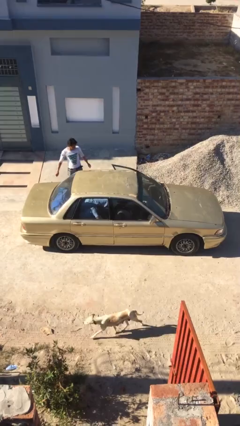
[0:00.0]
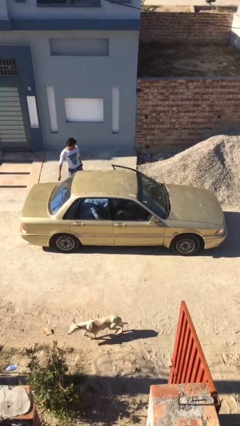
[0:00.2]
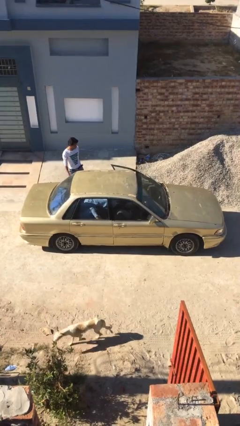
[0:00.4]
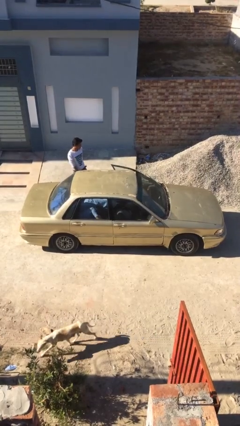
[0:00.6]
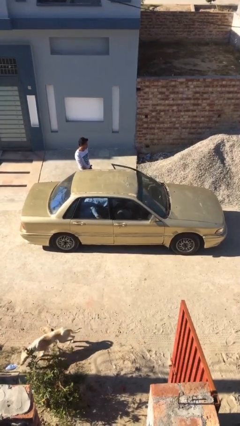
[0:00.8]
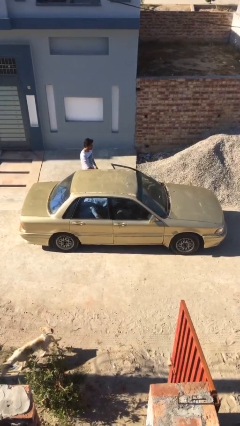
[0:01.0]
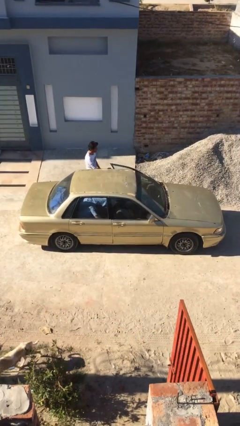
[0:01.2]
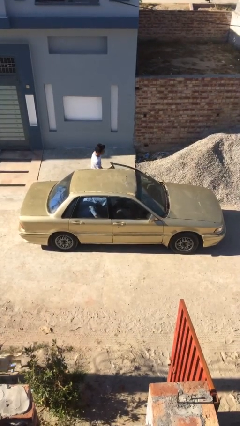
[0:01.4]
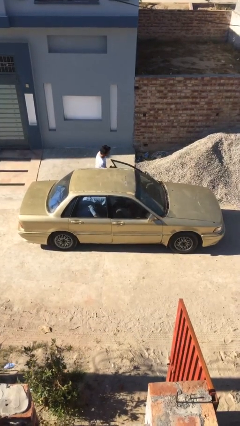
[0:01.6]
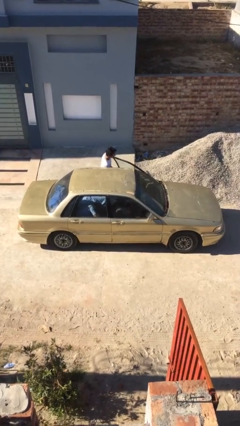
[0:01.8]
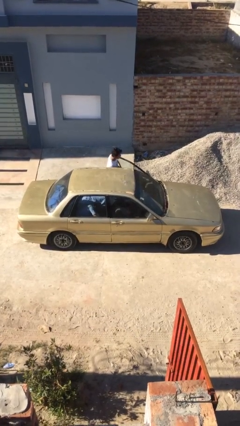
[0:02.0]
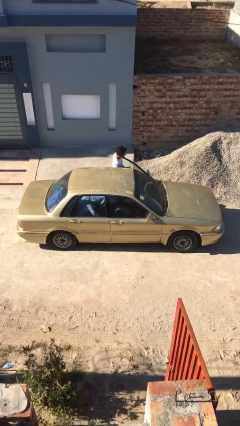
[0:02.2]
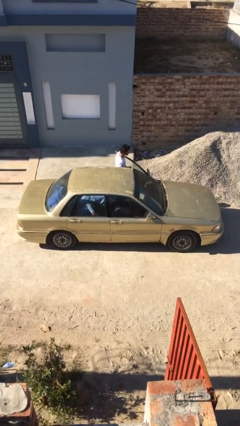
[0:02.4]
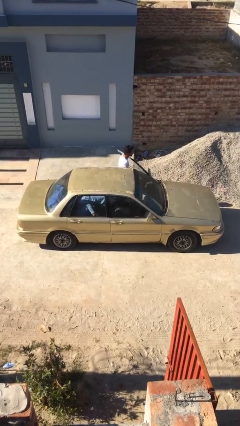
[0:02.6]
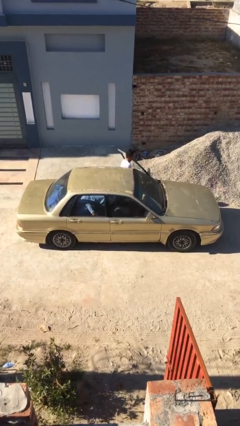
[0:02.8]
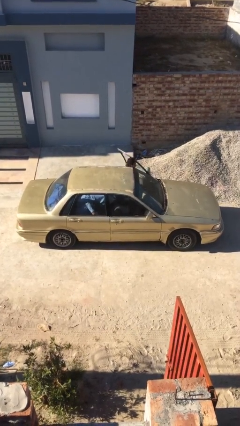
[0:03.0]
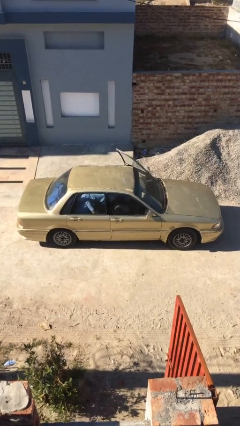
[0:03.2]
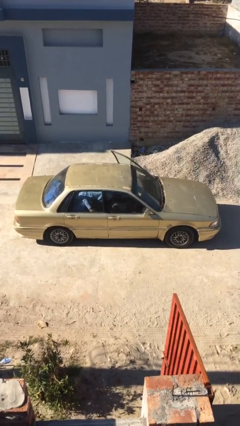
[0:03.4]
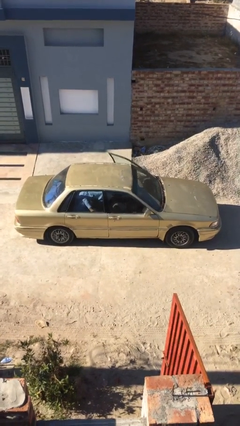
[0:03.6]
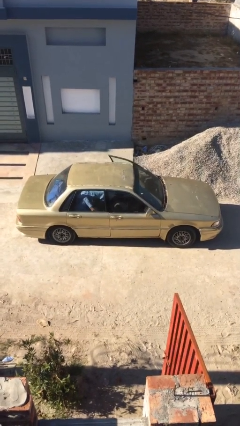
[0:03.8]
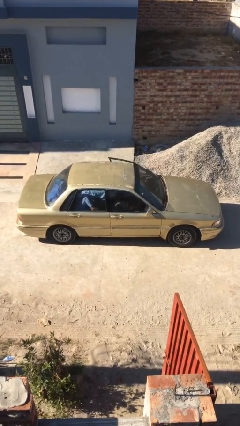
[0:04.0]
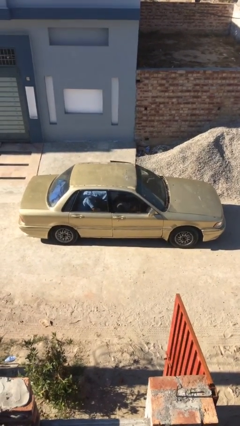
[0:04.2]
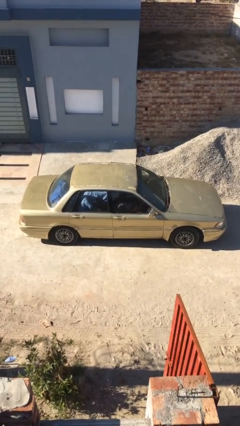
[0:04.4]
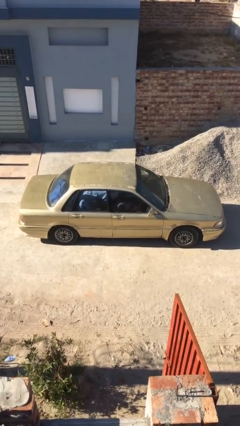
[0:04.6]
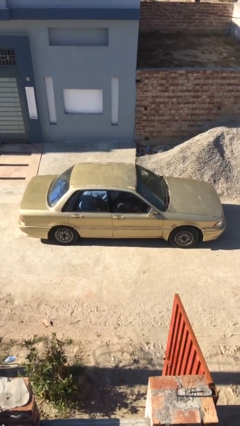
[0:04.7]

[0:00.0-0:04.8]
car picks up person

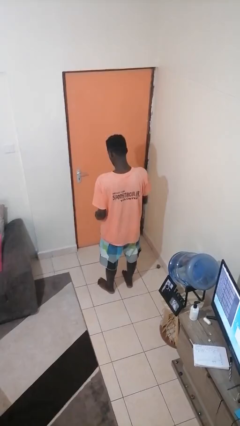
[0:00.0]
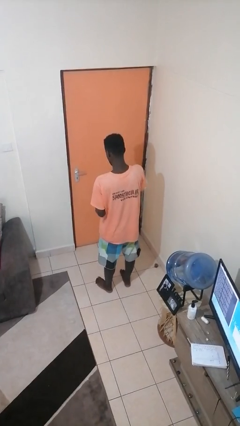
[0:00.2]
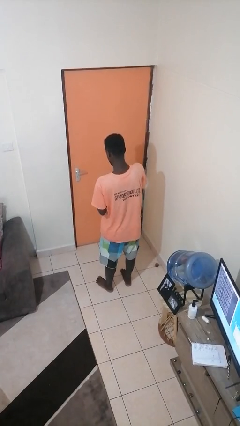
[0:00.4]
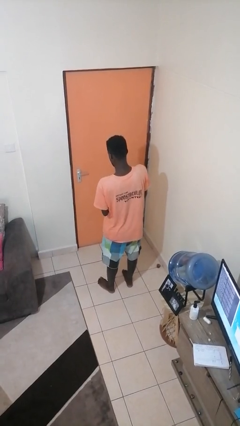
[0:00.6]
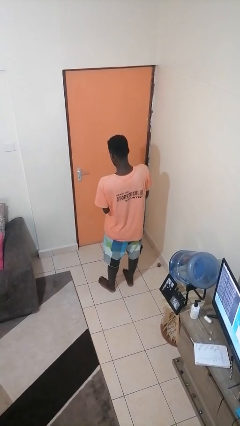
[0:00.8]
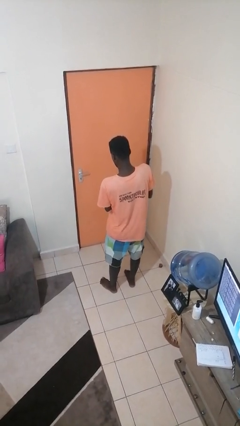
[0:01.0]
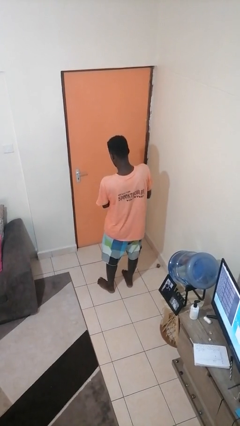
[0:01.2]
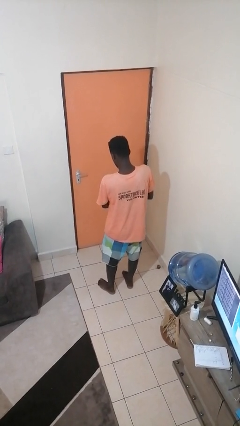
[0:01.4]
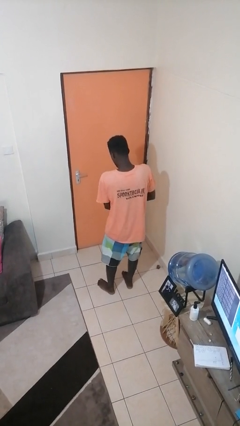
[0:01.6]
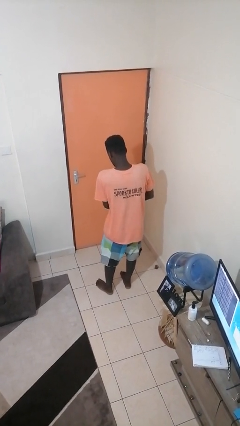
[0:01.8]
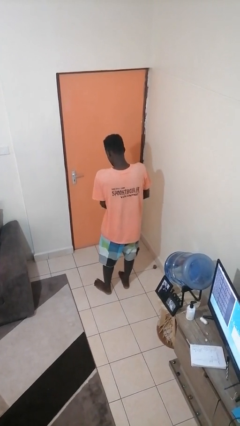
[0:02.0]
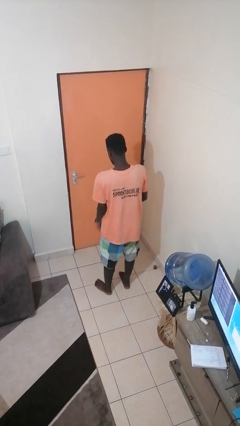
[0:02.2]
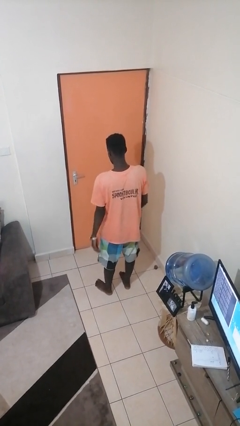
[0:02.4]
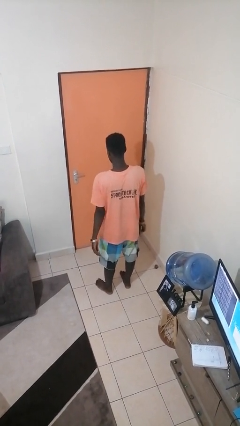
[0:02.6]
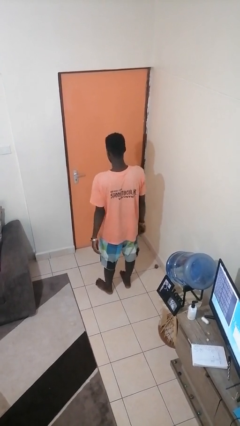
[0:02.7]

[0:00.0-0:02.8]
person puts on wristwatch

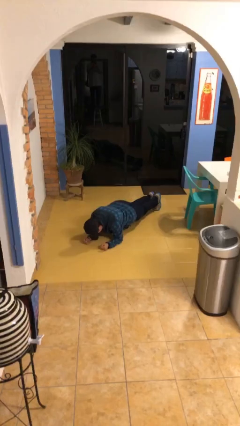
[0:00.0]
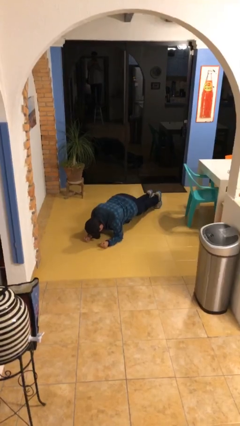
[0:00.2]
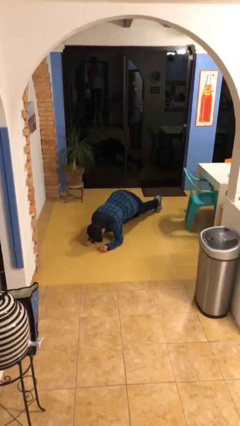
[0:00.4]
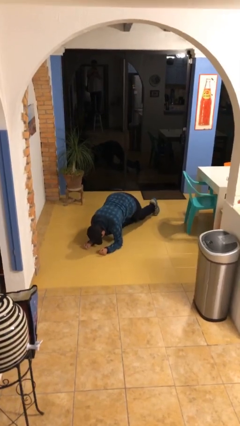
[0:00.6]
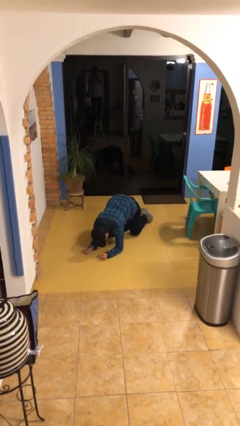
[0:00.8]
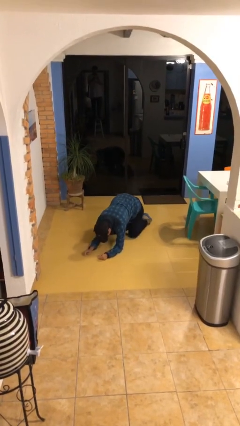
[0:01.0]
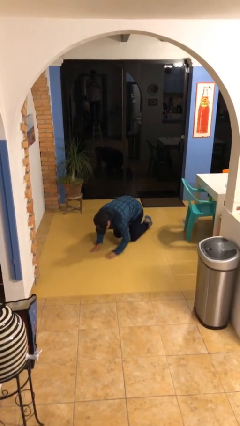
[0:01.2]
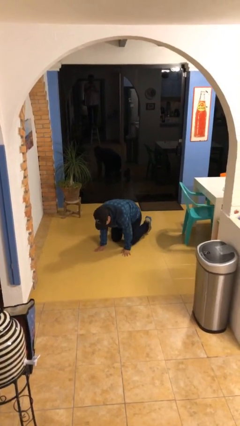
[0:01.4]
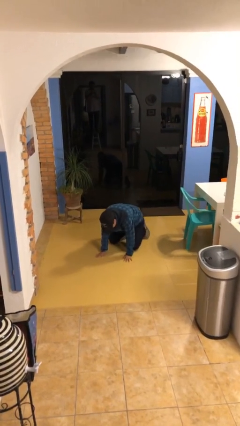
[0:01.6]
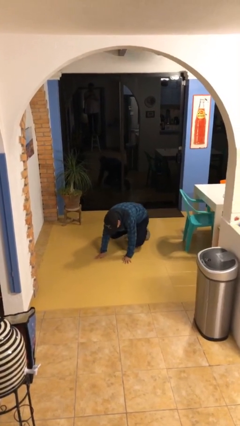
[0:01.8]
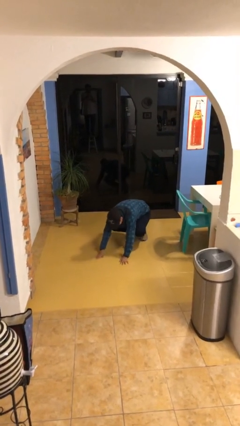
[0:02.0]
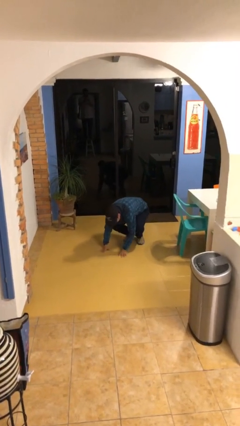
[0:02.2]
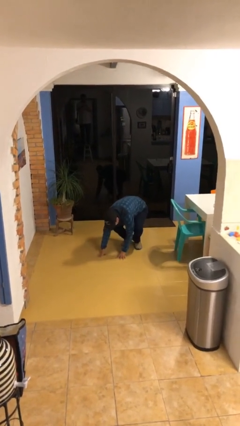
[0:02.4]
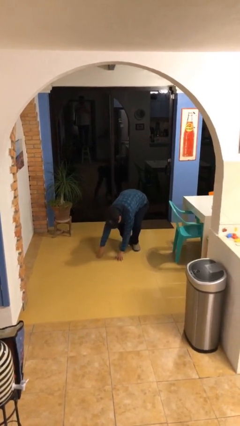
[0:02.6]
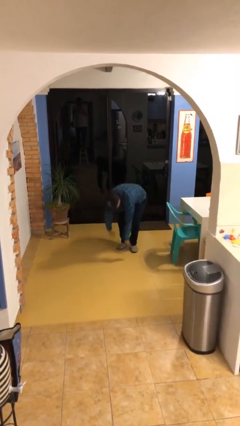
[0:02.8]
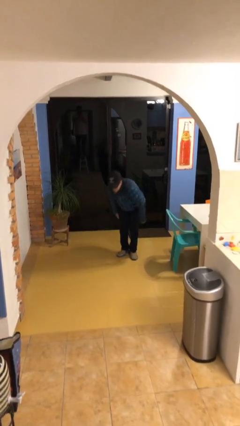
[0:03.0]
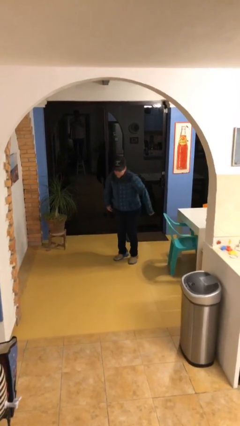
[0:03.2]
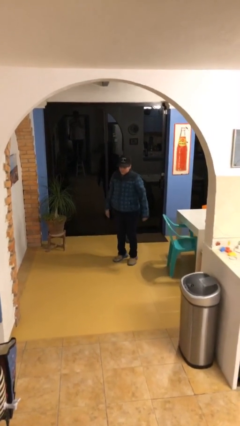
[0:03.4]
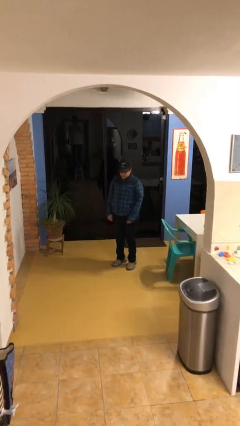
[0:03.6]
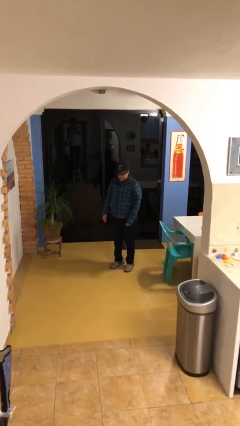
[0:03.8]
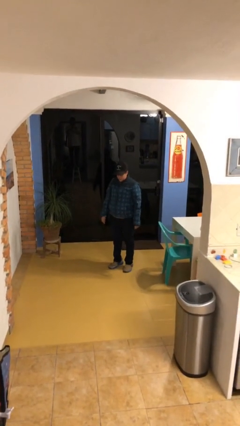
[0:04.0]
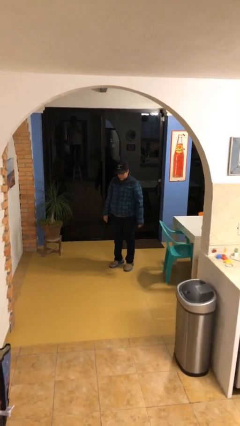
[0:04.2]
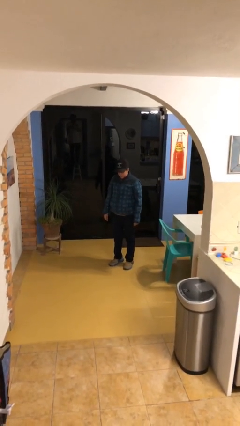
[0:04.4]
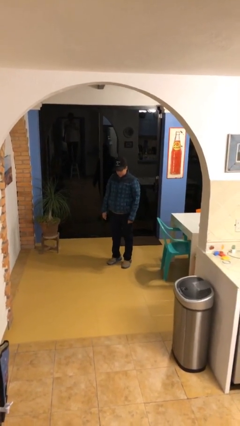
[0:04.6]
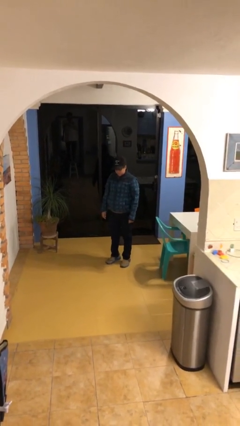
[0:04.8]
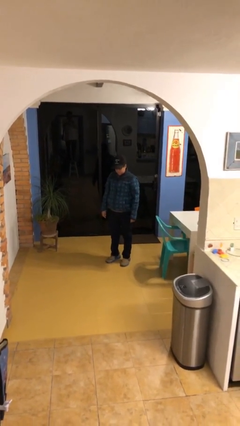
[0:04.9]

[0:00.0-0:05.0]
person stands up from floor

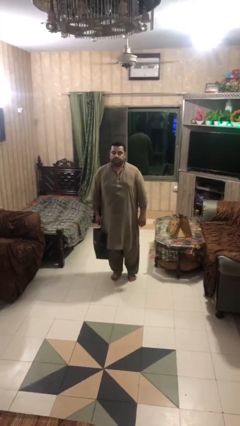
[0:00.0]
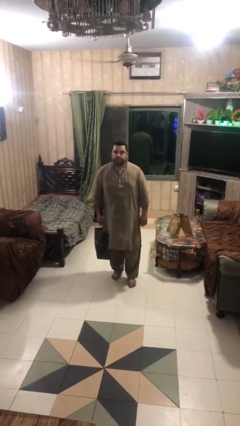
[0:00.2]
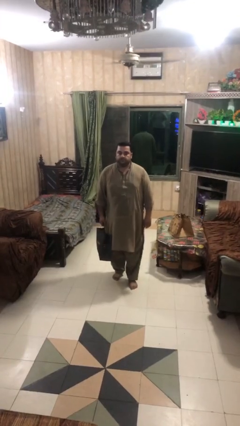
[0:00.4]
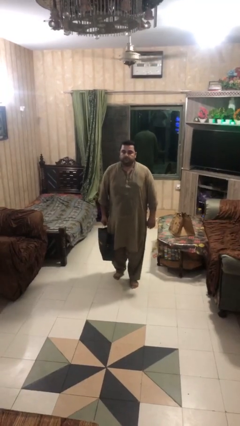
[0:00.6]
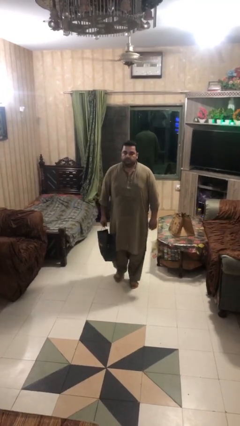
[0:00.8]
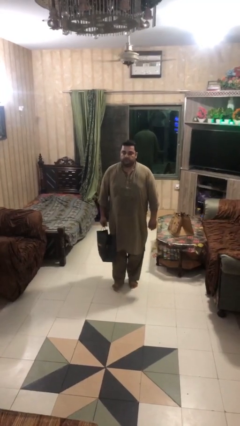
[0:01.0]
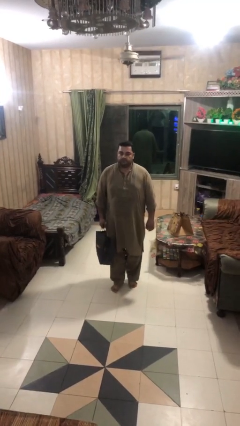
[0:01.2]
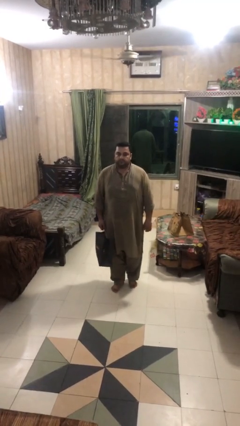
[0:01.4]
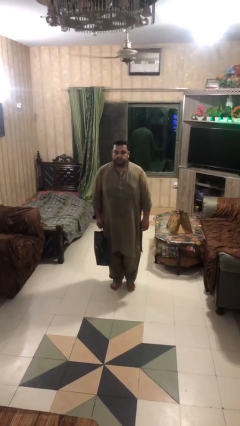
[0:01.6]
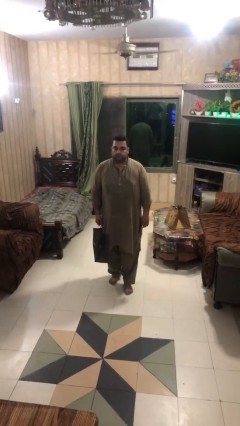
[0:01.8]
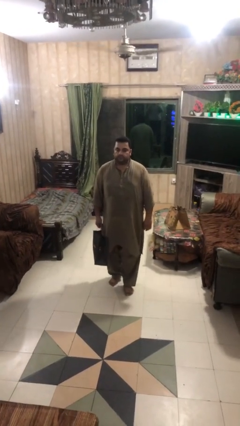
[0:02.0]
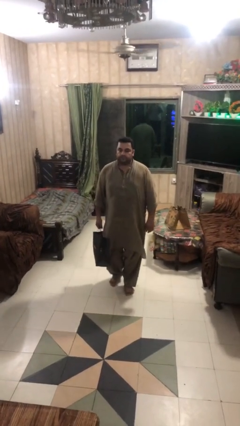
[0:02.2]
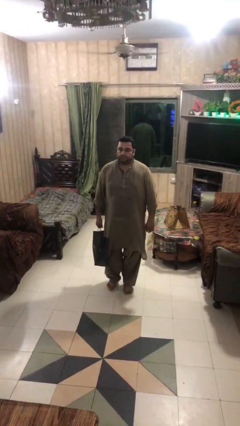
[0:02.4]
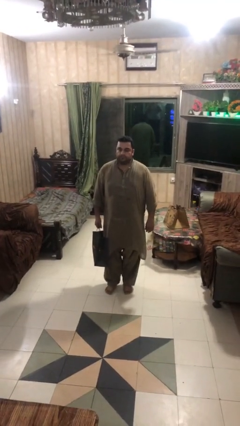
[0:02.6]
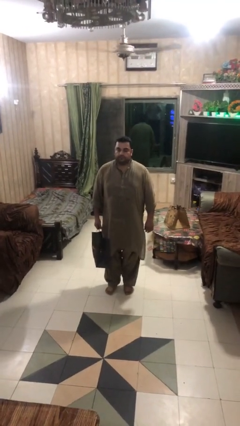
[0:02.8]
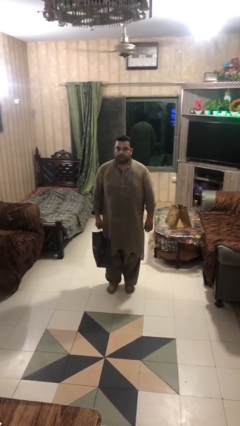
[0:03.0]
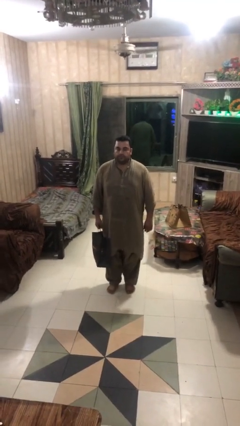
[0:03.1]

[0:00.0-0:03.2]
person carries groceries

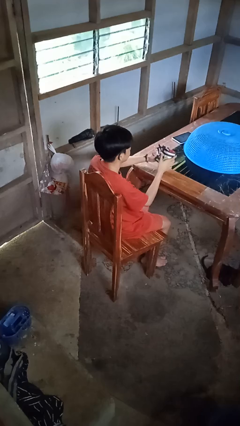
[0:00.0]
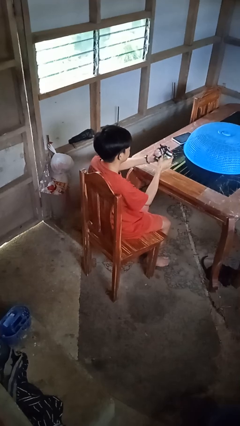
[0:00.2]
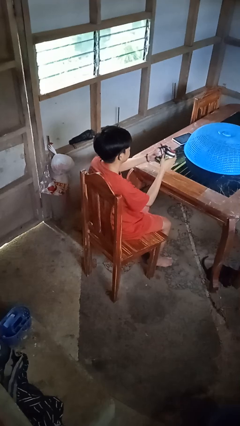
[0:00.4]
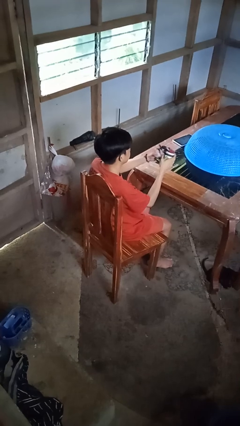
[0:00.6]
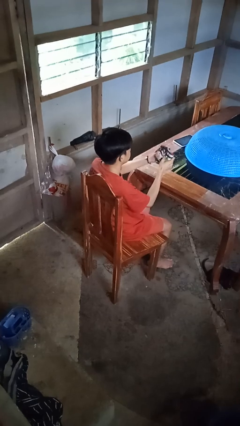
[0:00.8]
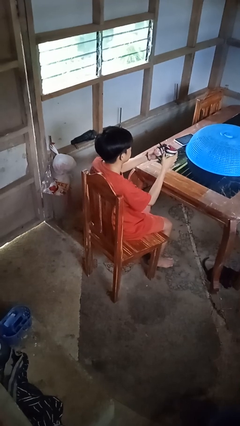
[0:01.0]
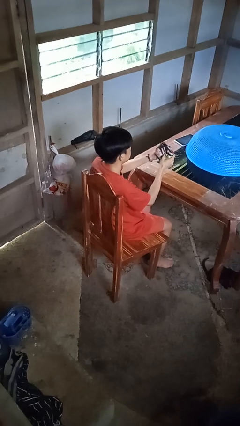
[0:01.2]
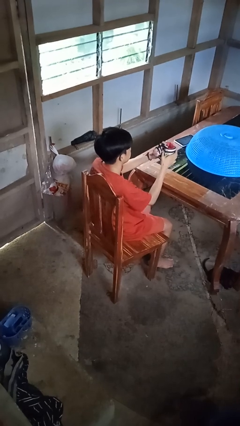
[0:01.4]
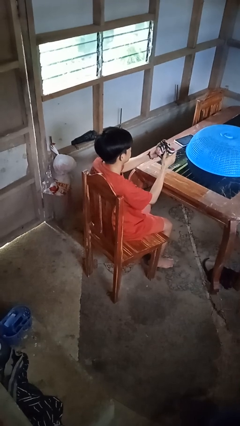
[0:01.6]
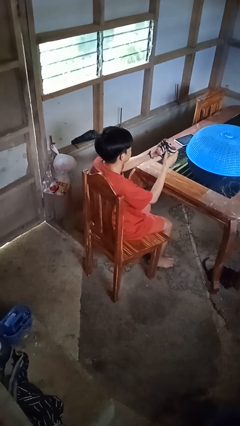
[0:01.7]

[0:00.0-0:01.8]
person squeezes object
